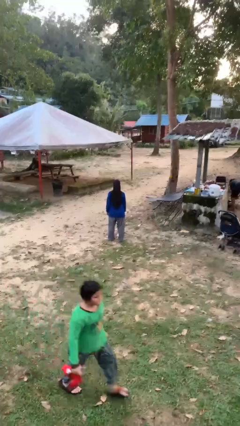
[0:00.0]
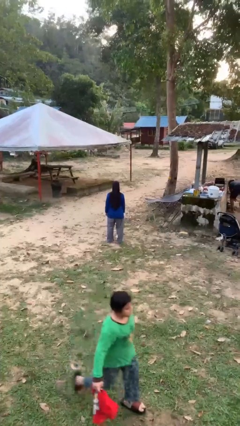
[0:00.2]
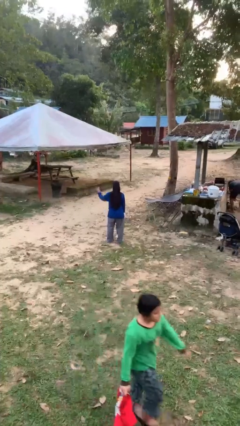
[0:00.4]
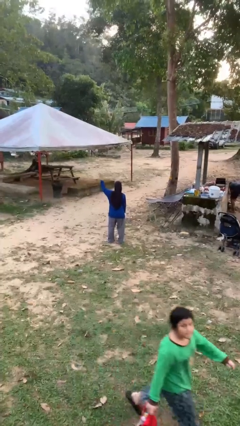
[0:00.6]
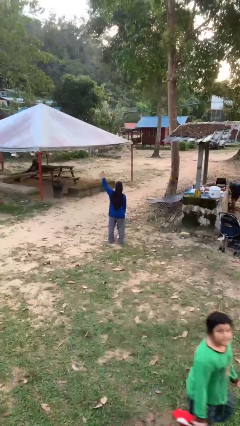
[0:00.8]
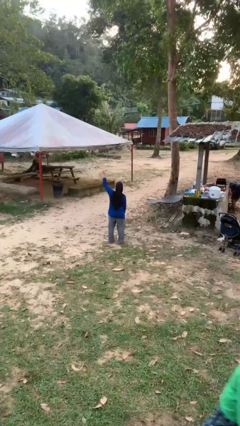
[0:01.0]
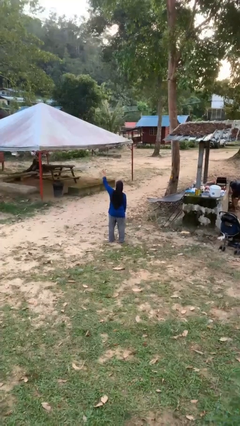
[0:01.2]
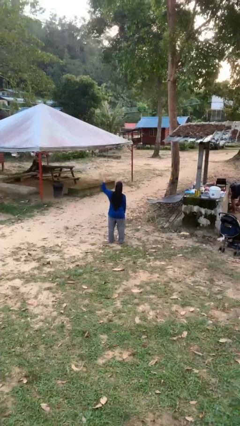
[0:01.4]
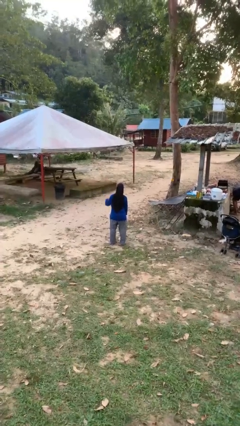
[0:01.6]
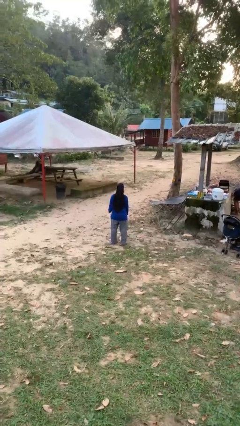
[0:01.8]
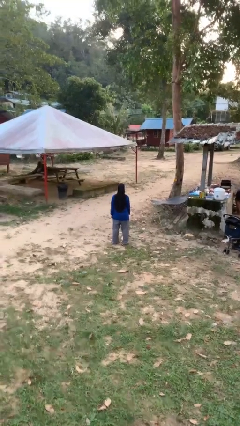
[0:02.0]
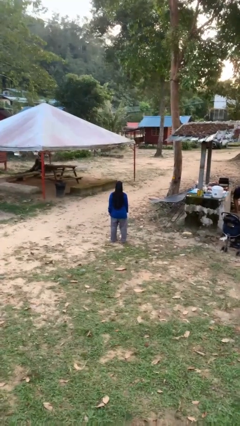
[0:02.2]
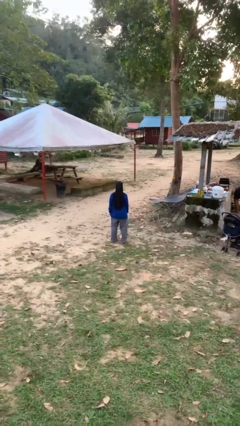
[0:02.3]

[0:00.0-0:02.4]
person gestures number four

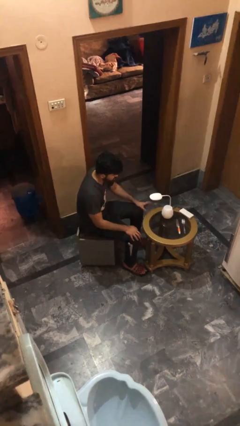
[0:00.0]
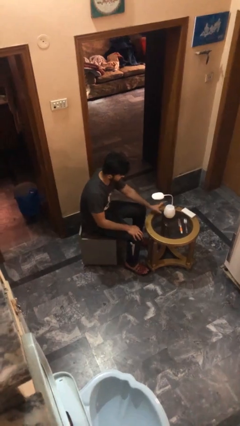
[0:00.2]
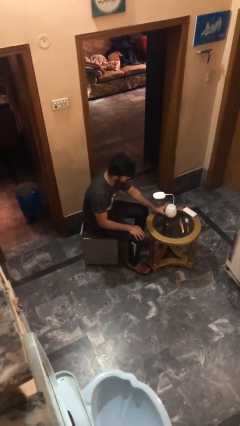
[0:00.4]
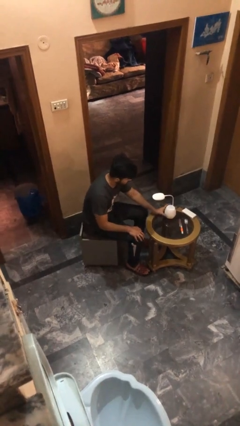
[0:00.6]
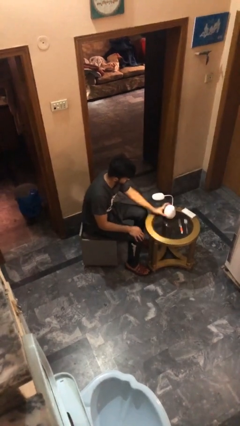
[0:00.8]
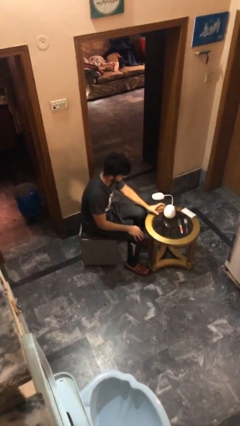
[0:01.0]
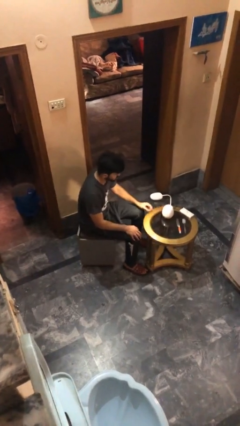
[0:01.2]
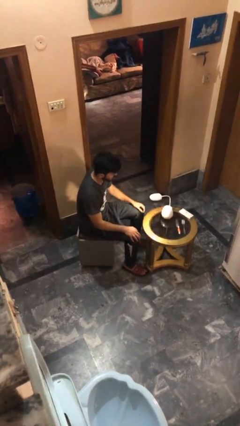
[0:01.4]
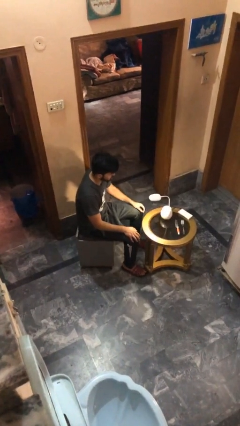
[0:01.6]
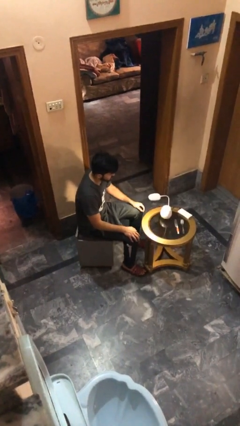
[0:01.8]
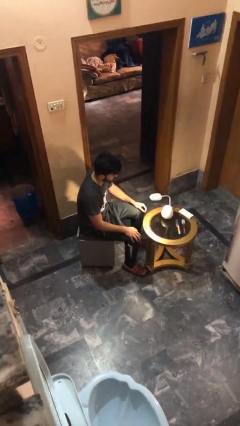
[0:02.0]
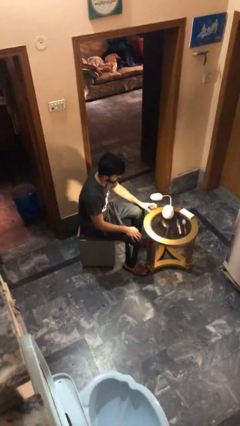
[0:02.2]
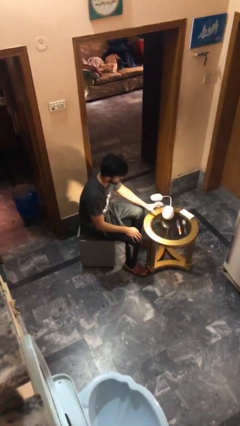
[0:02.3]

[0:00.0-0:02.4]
person turns on lamp

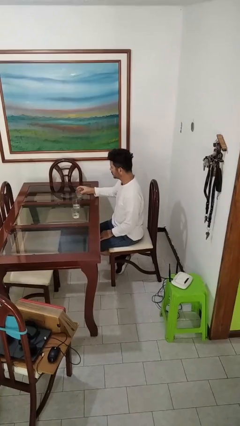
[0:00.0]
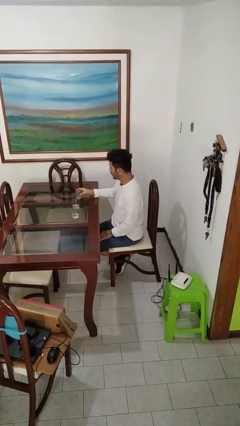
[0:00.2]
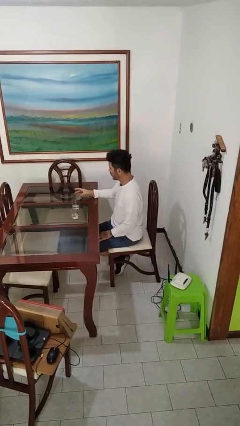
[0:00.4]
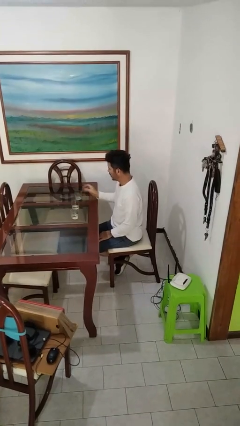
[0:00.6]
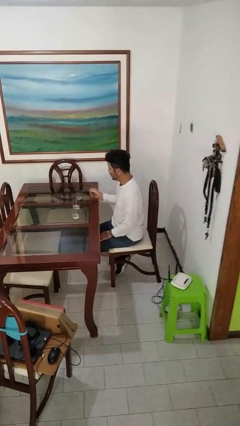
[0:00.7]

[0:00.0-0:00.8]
person puts down object on table

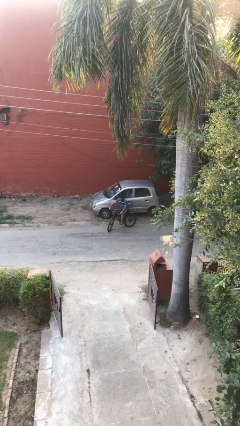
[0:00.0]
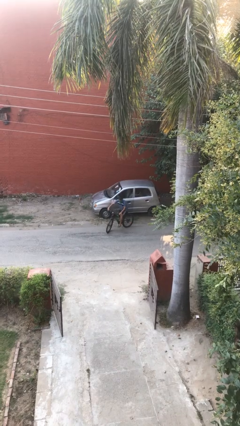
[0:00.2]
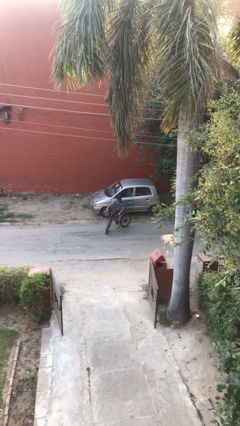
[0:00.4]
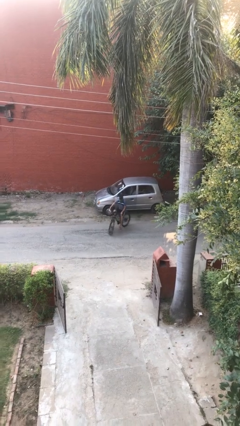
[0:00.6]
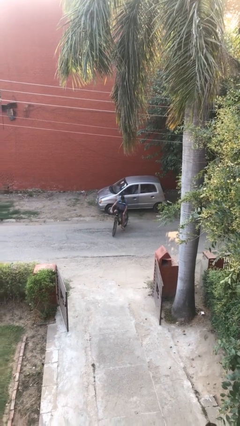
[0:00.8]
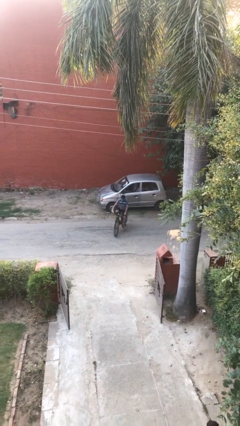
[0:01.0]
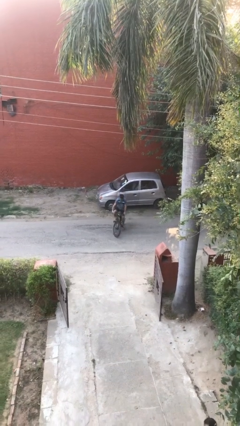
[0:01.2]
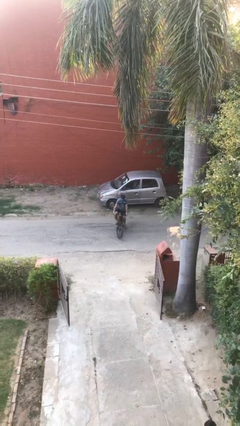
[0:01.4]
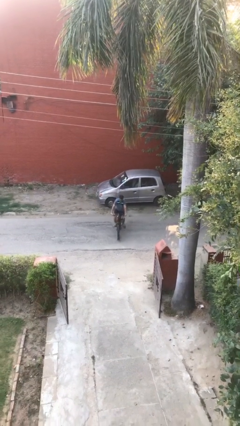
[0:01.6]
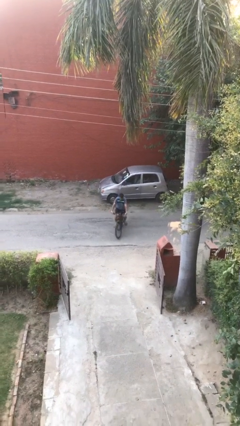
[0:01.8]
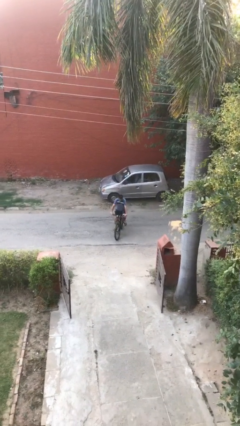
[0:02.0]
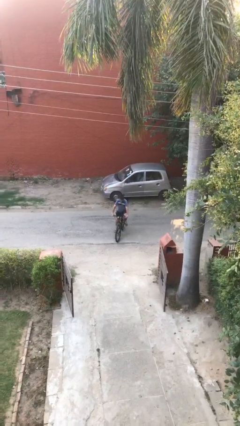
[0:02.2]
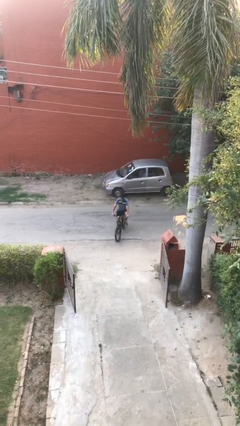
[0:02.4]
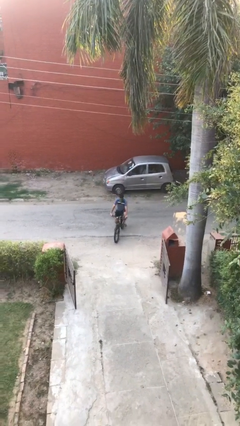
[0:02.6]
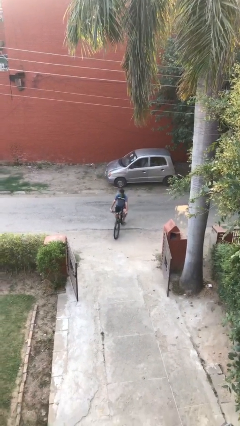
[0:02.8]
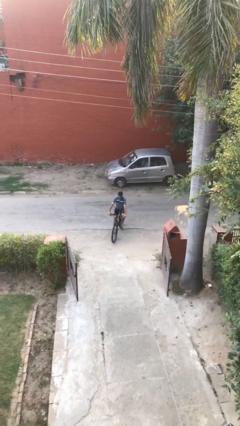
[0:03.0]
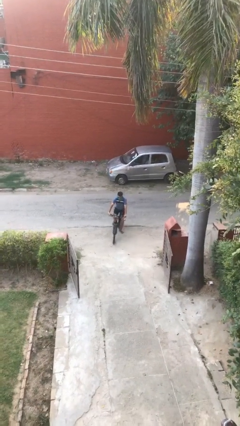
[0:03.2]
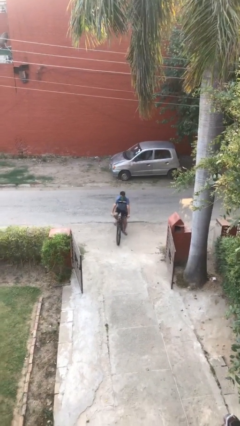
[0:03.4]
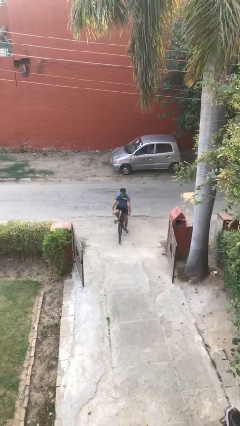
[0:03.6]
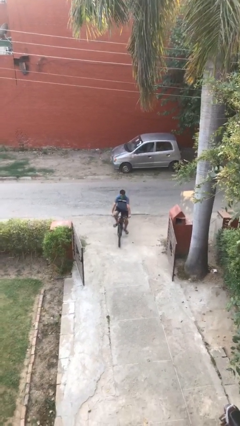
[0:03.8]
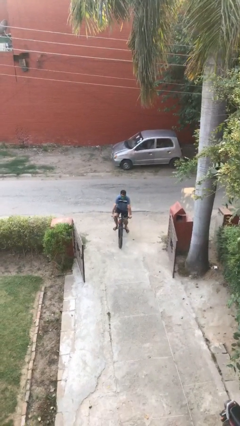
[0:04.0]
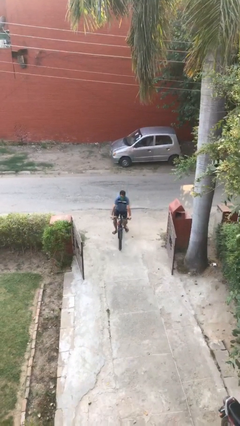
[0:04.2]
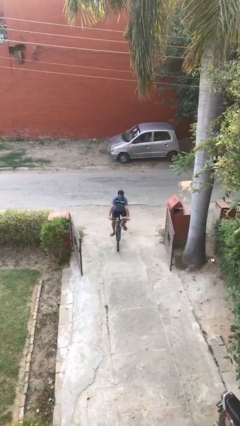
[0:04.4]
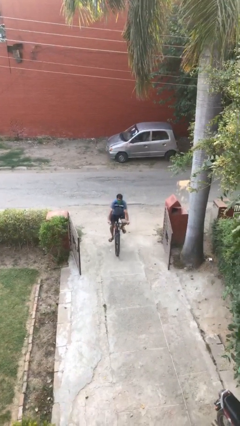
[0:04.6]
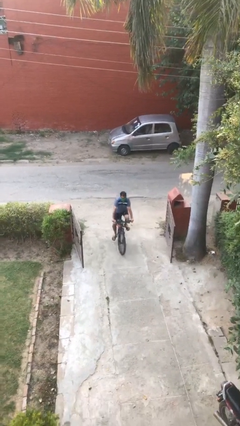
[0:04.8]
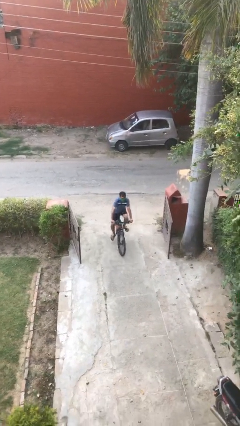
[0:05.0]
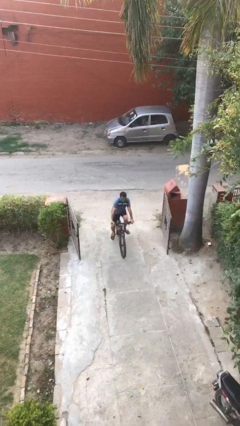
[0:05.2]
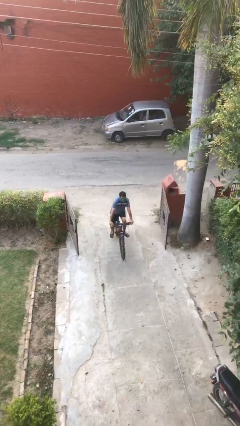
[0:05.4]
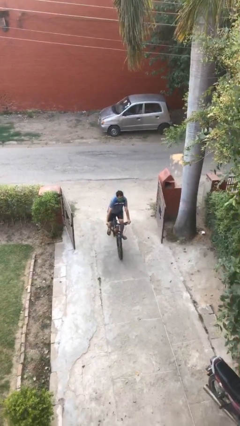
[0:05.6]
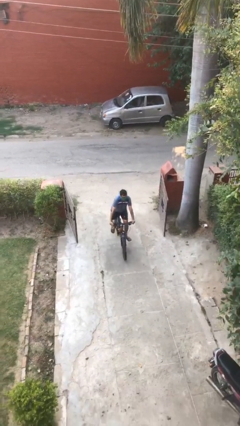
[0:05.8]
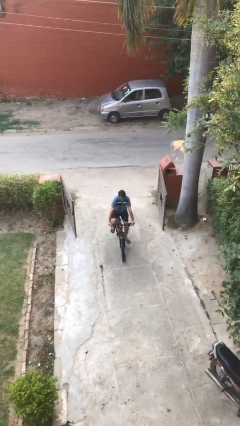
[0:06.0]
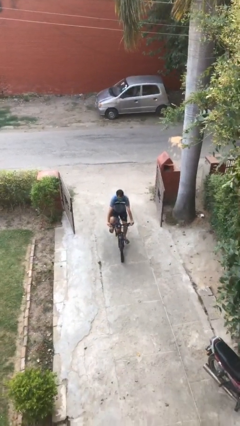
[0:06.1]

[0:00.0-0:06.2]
person rides bicycle

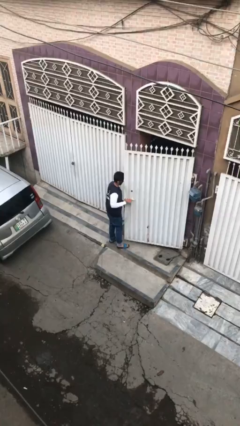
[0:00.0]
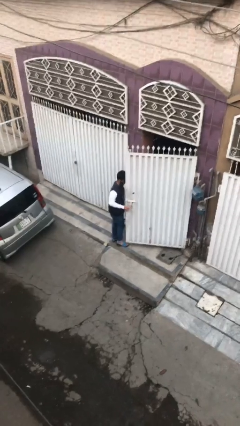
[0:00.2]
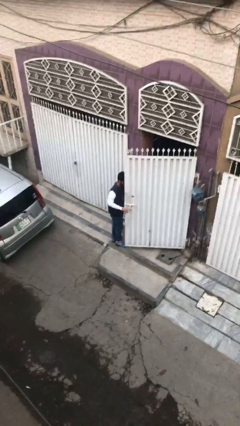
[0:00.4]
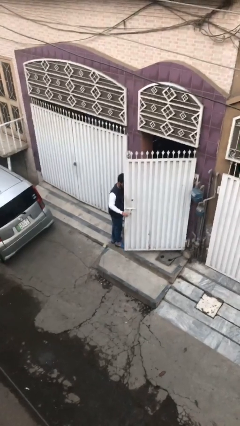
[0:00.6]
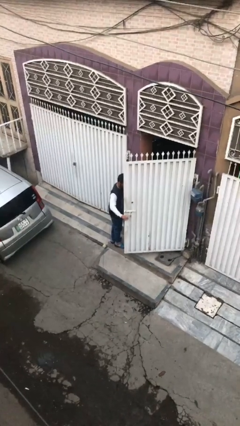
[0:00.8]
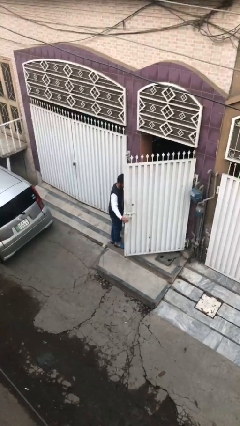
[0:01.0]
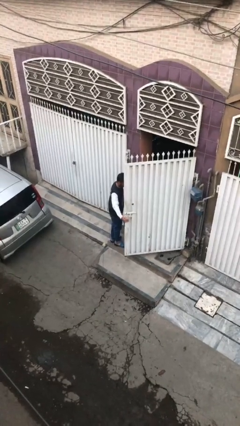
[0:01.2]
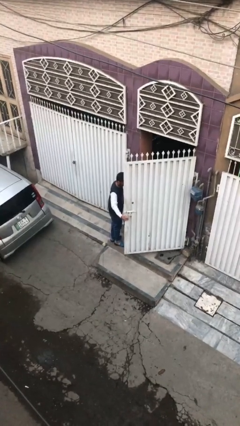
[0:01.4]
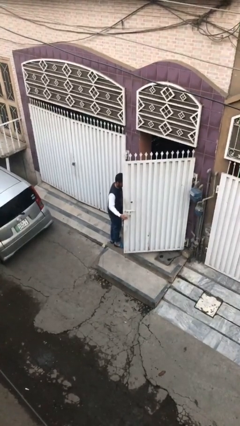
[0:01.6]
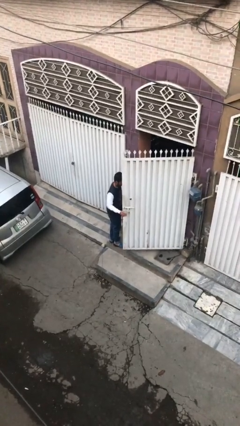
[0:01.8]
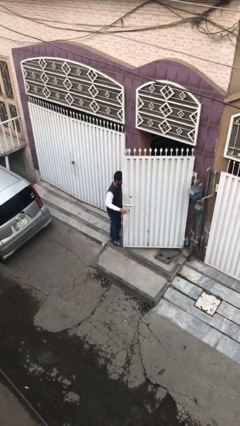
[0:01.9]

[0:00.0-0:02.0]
person opens facility door

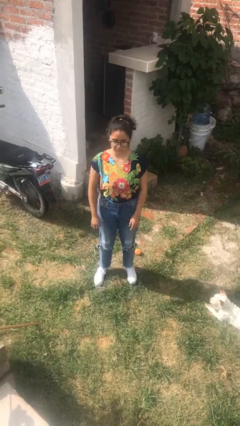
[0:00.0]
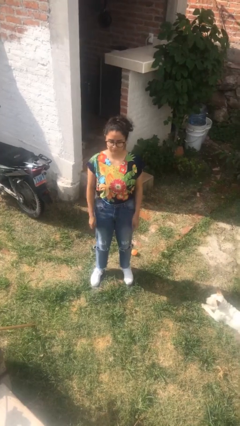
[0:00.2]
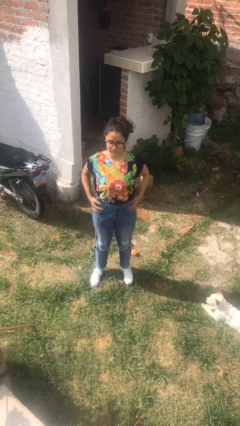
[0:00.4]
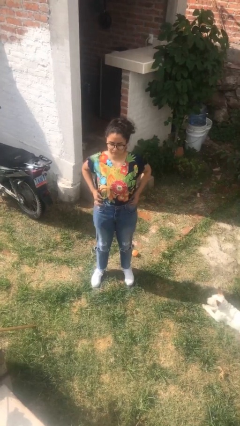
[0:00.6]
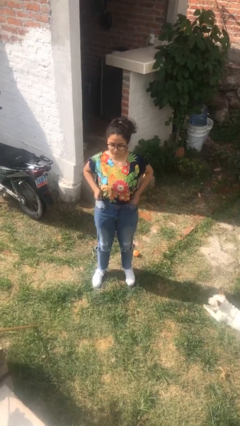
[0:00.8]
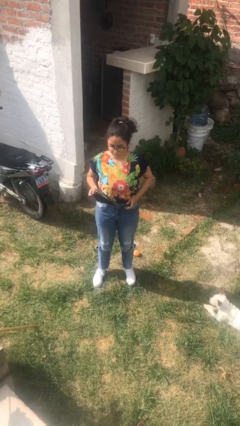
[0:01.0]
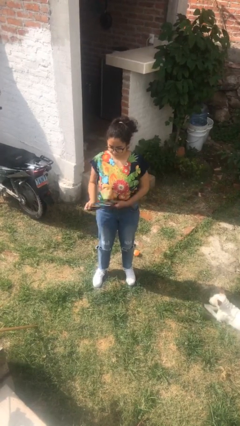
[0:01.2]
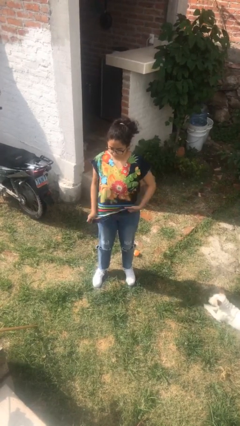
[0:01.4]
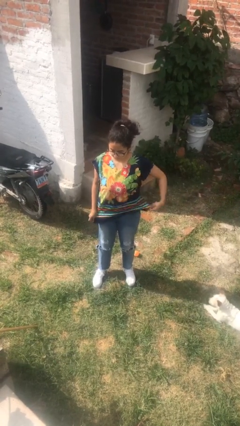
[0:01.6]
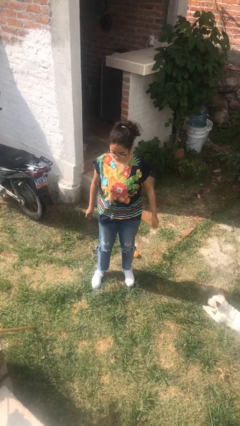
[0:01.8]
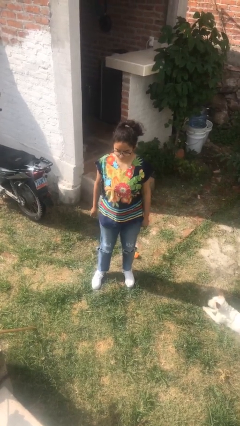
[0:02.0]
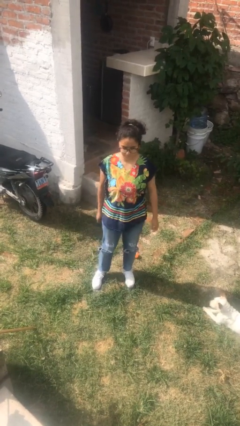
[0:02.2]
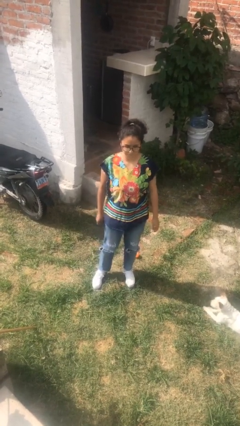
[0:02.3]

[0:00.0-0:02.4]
person untucks shirt

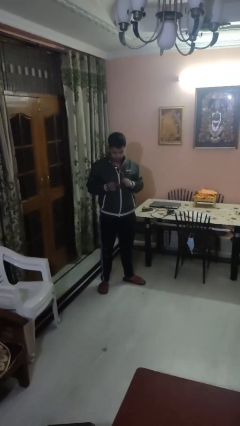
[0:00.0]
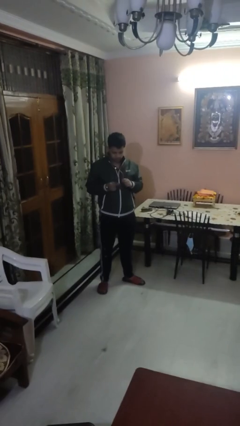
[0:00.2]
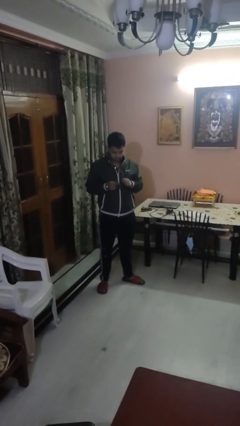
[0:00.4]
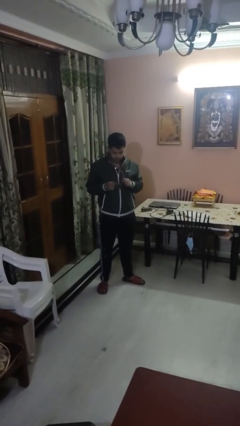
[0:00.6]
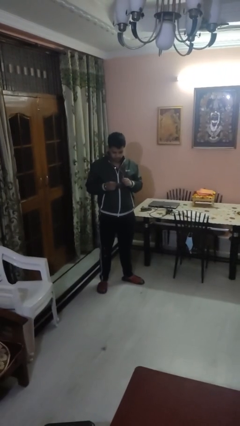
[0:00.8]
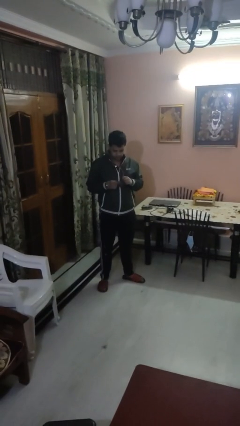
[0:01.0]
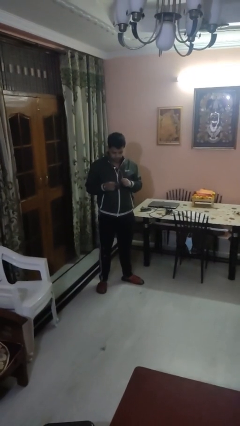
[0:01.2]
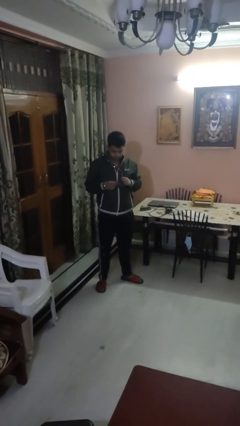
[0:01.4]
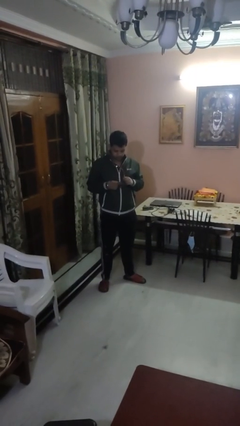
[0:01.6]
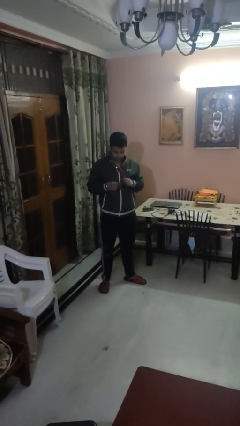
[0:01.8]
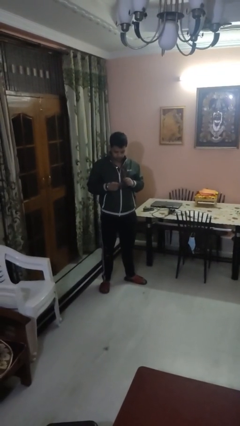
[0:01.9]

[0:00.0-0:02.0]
person cleans eyeglasses
